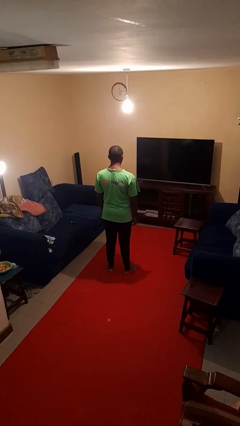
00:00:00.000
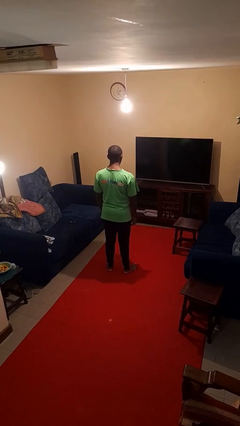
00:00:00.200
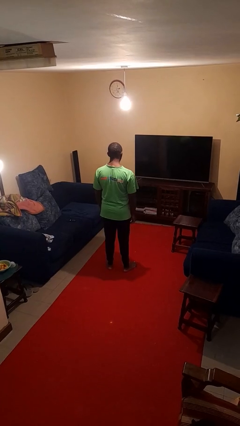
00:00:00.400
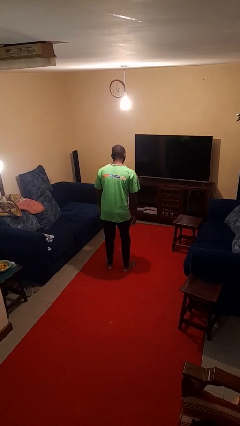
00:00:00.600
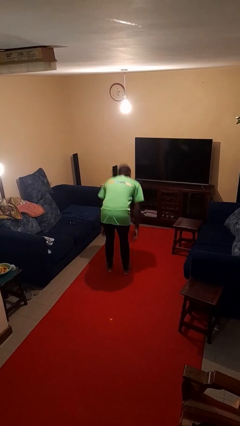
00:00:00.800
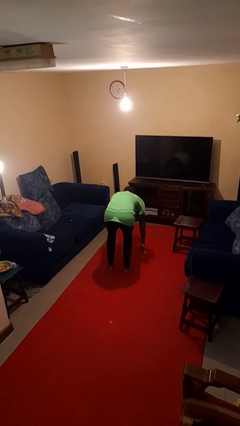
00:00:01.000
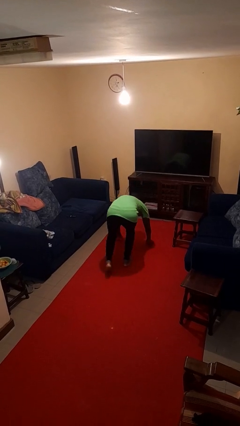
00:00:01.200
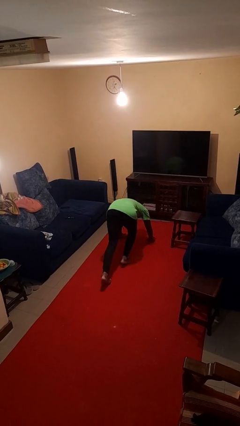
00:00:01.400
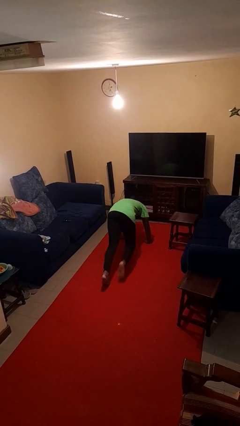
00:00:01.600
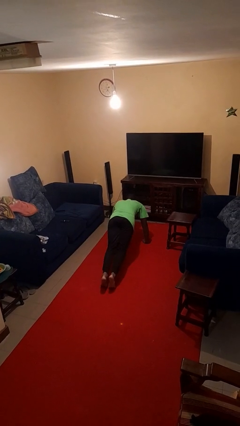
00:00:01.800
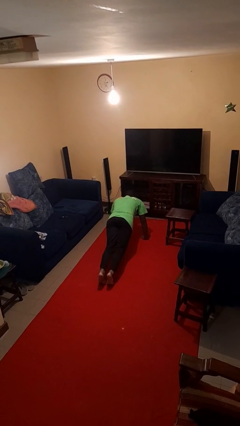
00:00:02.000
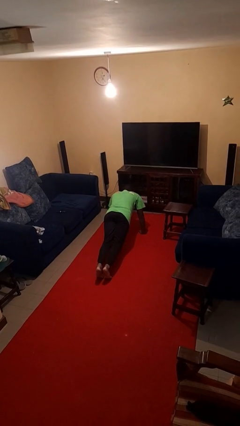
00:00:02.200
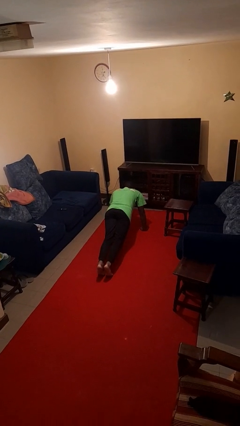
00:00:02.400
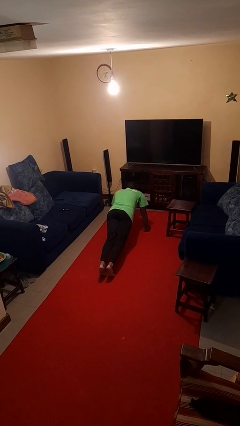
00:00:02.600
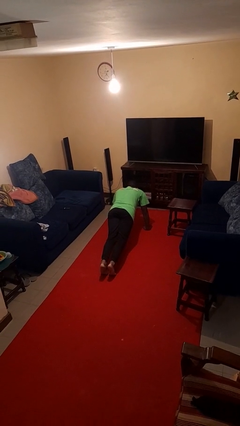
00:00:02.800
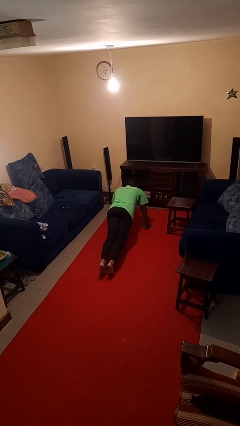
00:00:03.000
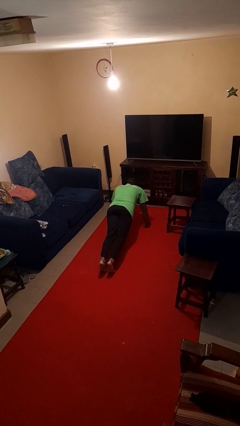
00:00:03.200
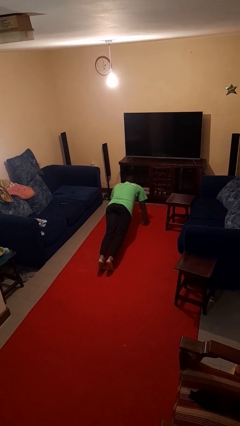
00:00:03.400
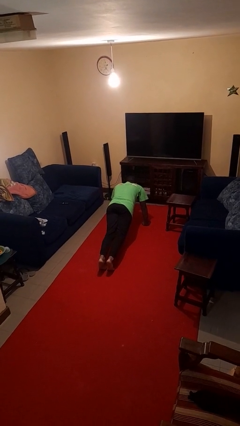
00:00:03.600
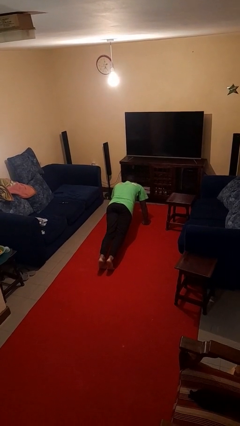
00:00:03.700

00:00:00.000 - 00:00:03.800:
person exercises with plank

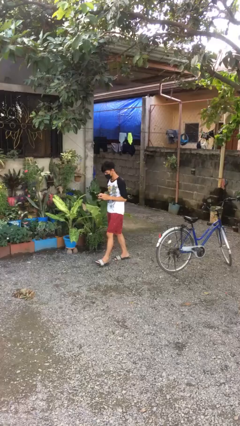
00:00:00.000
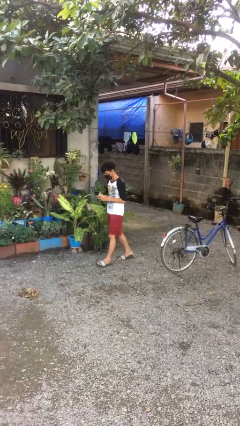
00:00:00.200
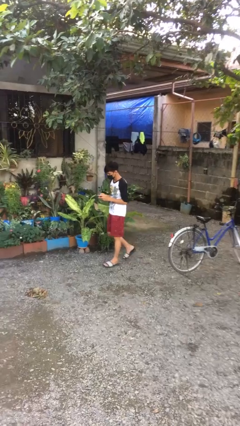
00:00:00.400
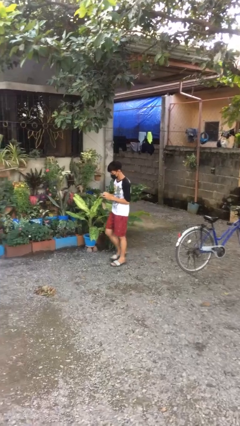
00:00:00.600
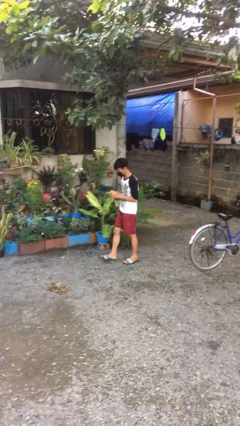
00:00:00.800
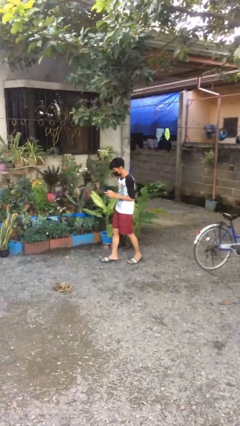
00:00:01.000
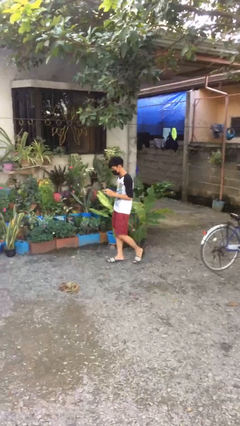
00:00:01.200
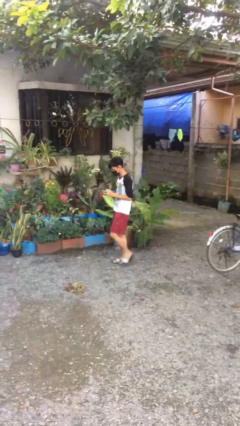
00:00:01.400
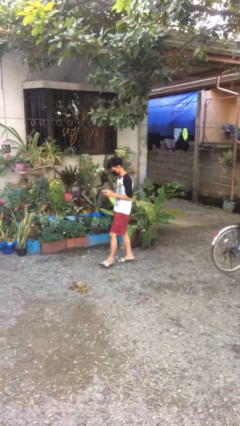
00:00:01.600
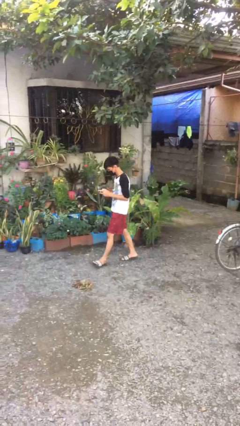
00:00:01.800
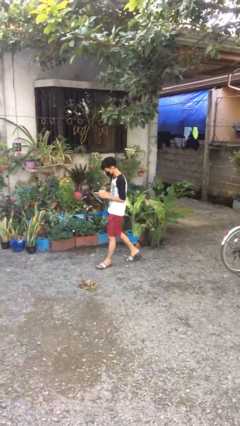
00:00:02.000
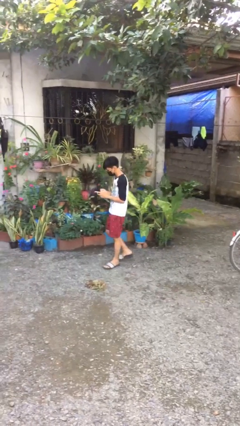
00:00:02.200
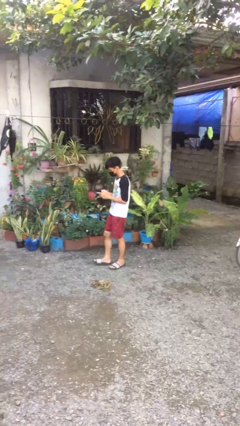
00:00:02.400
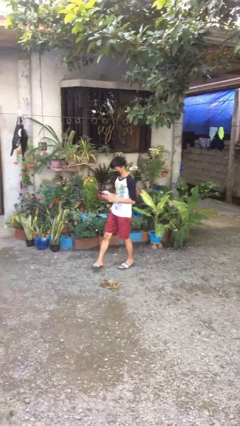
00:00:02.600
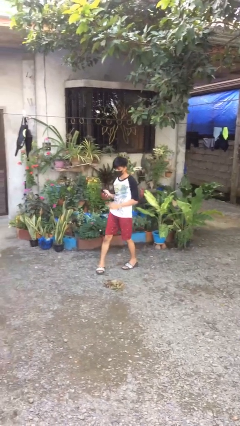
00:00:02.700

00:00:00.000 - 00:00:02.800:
person texts on phone

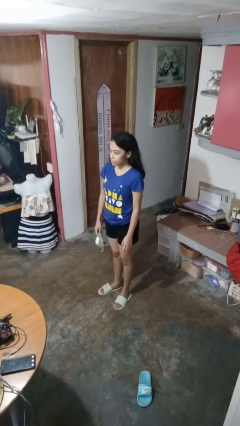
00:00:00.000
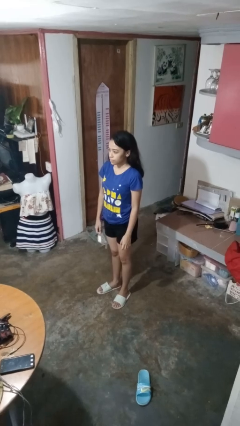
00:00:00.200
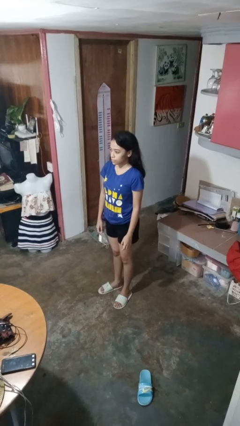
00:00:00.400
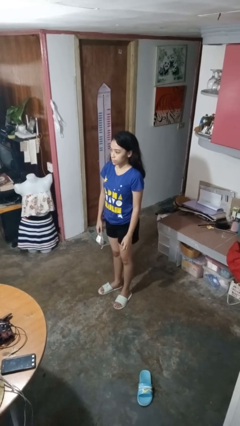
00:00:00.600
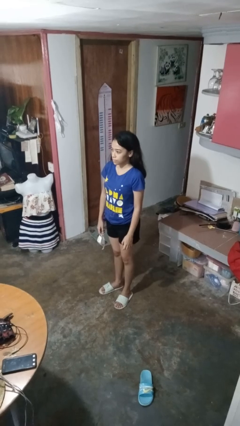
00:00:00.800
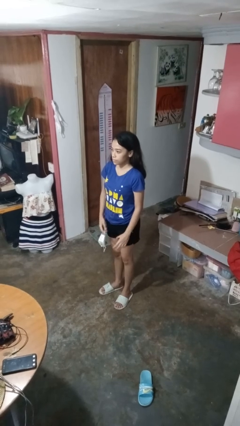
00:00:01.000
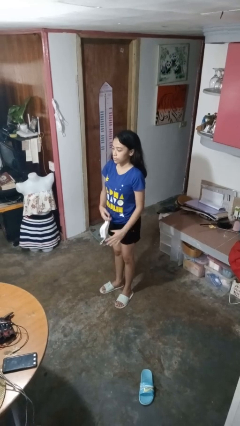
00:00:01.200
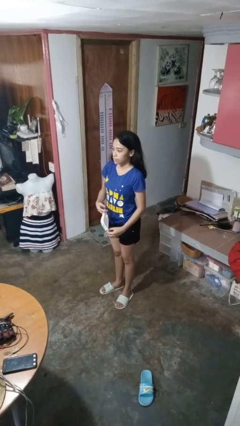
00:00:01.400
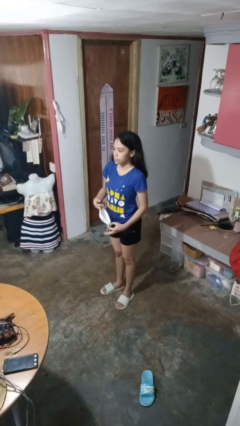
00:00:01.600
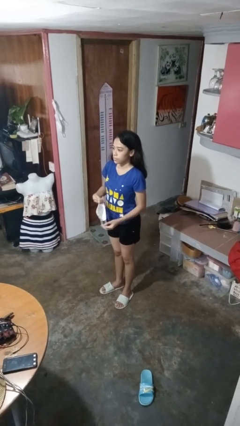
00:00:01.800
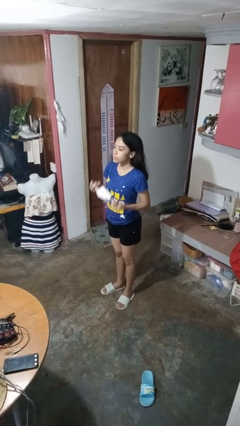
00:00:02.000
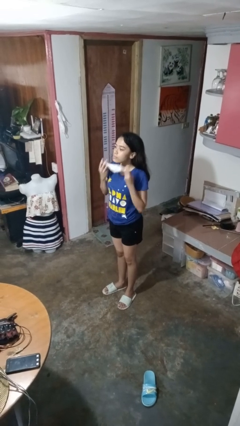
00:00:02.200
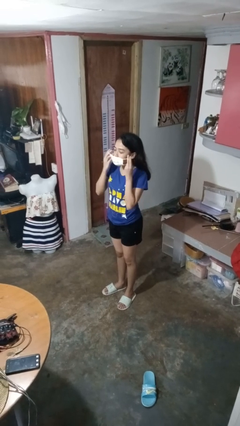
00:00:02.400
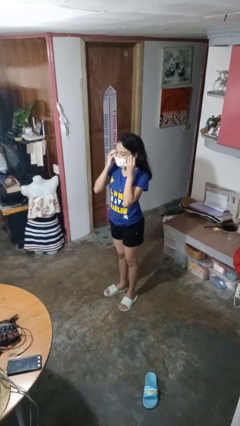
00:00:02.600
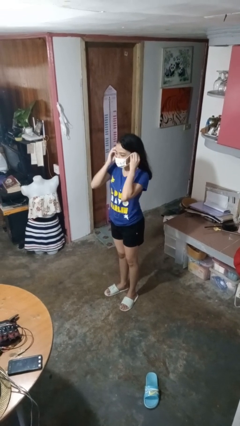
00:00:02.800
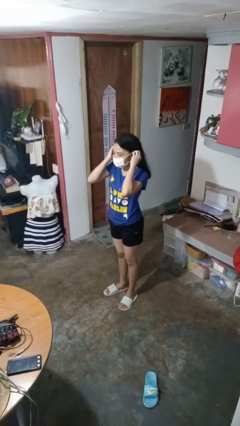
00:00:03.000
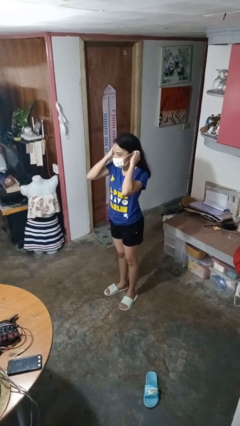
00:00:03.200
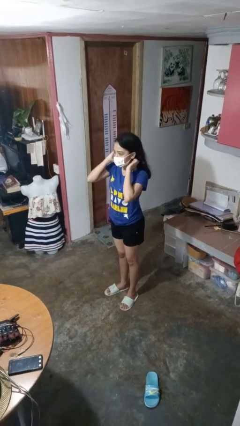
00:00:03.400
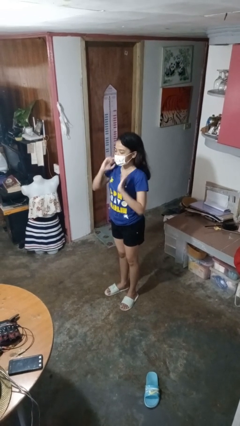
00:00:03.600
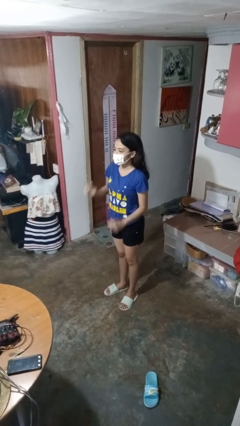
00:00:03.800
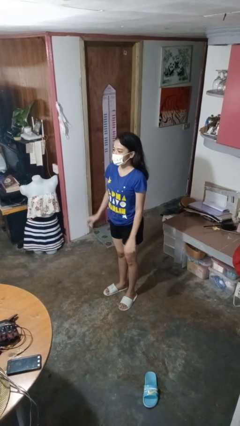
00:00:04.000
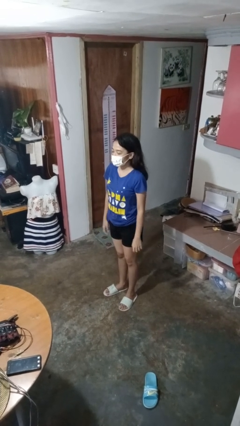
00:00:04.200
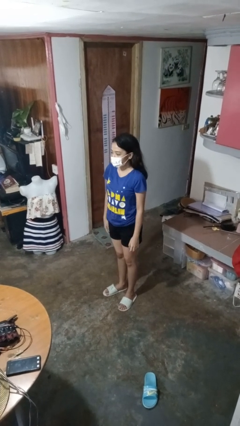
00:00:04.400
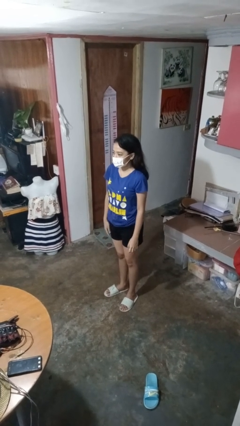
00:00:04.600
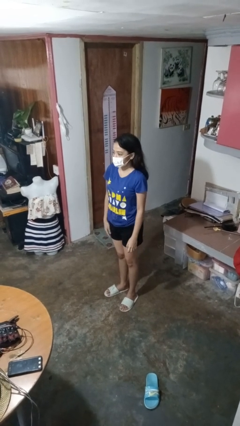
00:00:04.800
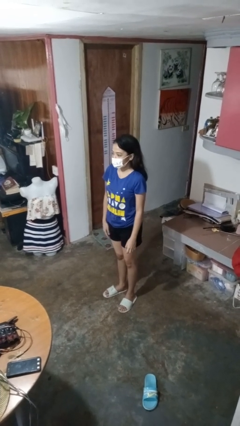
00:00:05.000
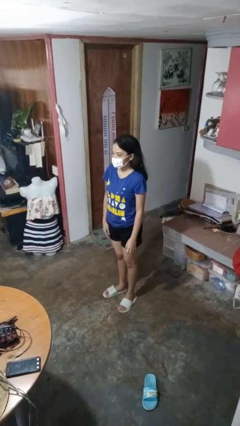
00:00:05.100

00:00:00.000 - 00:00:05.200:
person puts on facemask

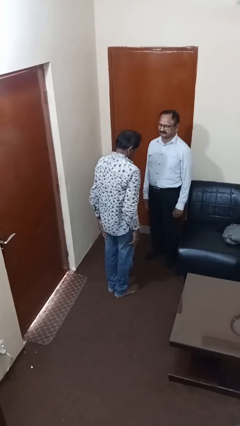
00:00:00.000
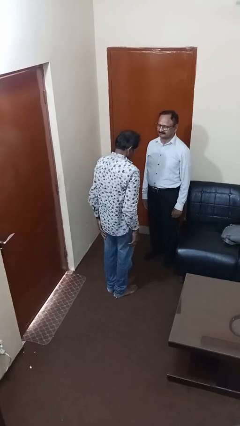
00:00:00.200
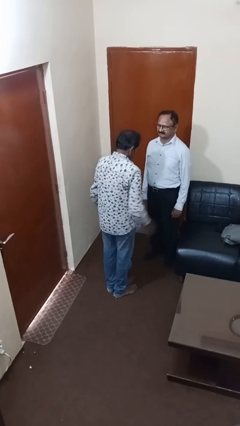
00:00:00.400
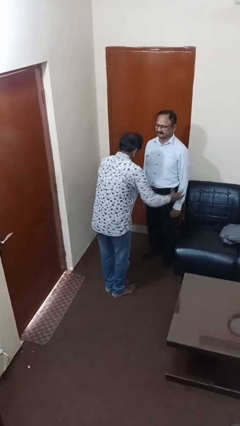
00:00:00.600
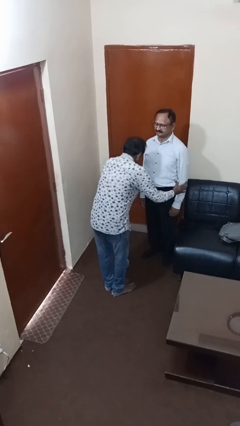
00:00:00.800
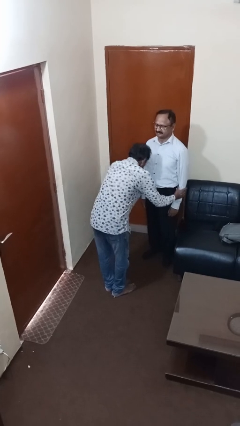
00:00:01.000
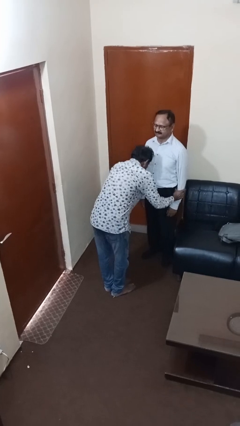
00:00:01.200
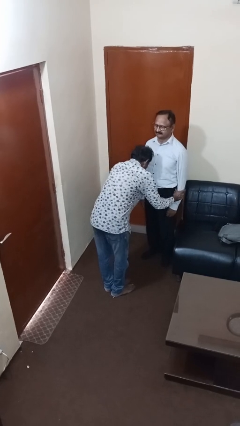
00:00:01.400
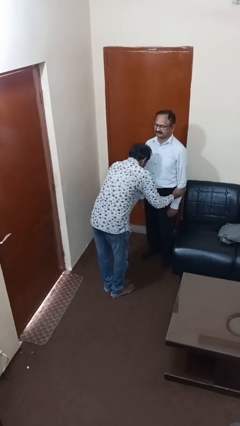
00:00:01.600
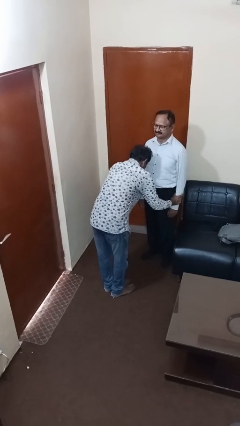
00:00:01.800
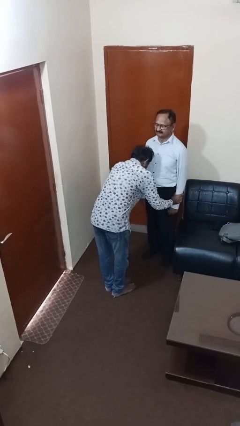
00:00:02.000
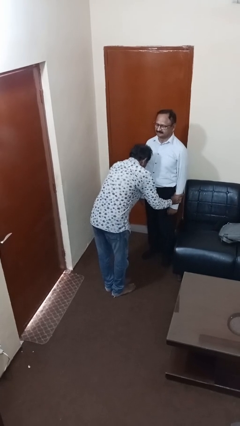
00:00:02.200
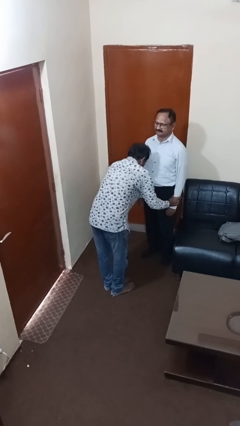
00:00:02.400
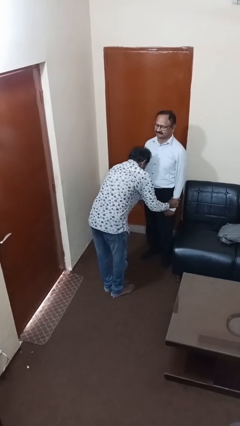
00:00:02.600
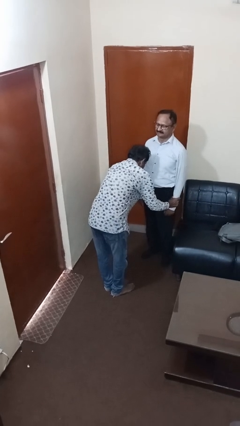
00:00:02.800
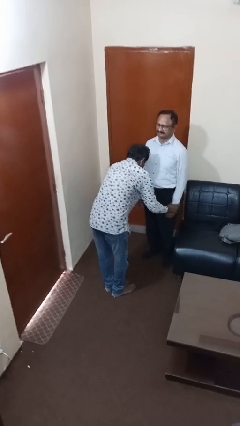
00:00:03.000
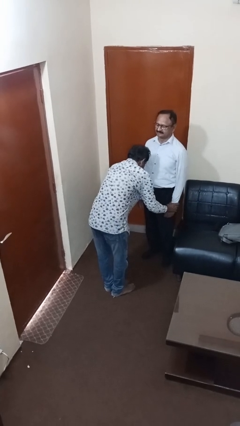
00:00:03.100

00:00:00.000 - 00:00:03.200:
person grabs person by forearm

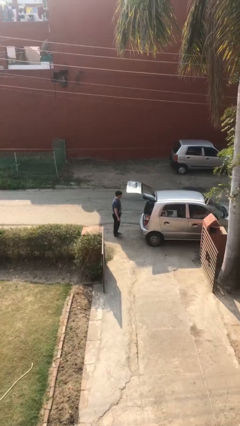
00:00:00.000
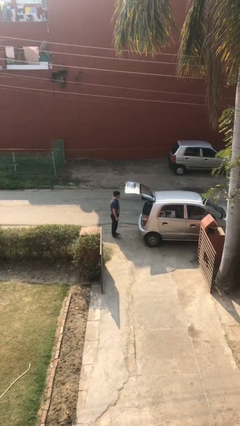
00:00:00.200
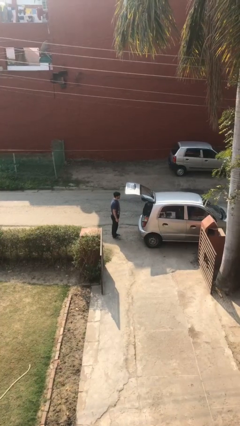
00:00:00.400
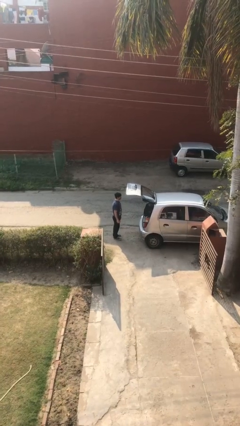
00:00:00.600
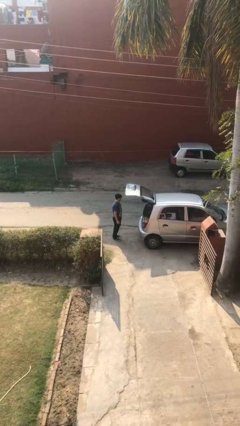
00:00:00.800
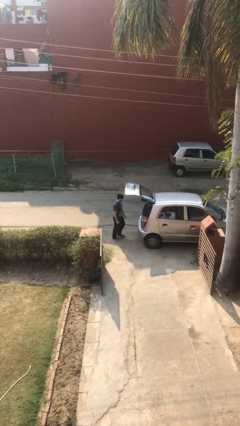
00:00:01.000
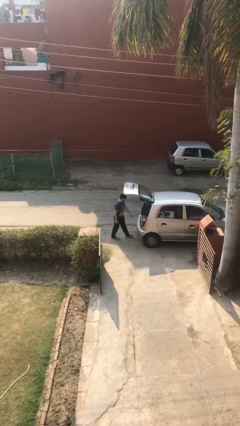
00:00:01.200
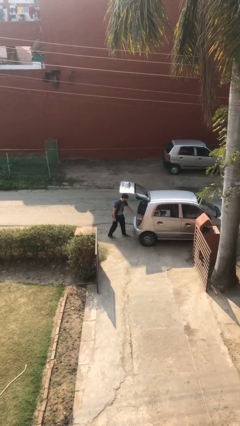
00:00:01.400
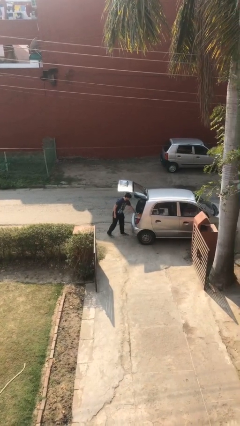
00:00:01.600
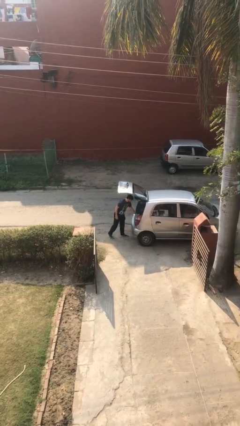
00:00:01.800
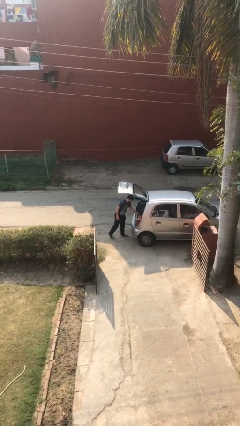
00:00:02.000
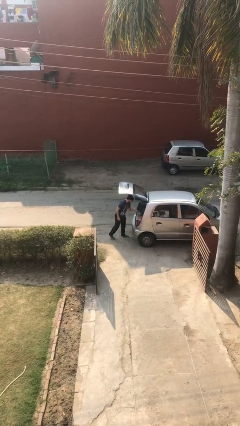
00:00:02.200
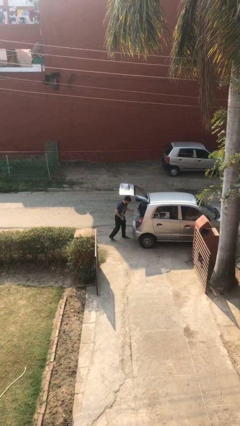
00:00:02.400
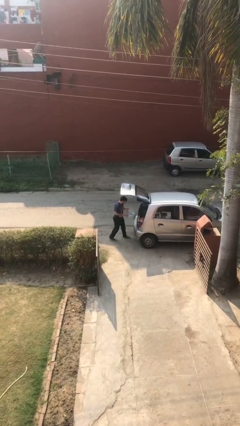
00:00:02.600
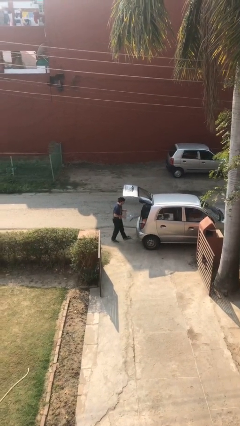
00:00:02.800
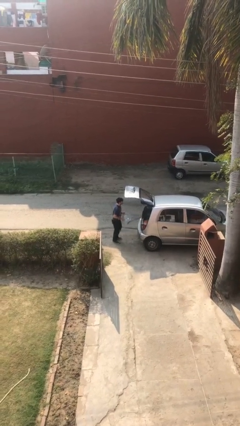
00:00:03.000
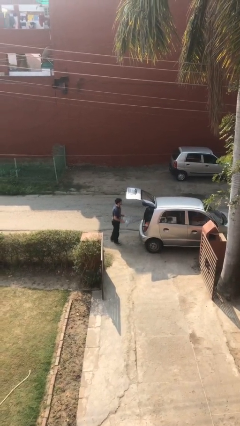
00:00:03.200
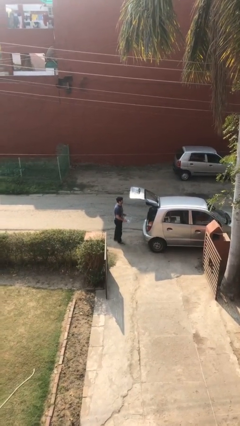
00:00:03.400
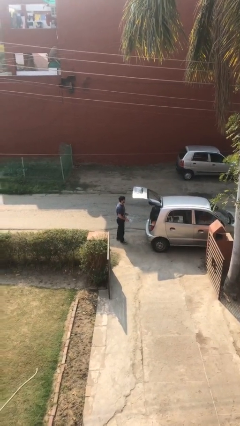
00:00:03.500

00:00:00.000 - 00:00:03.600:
person unloads car
